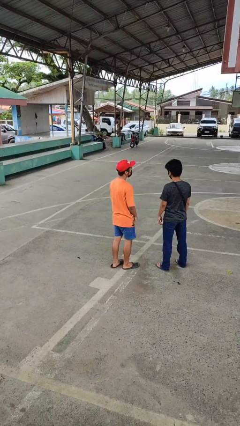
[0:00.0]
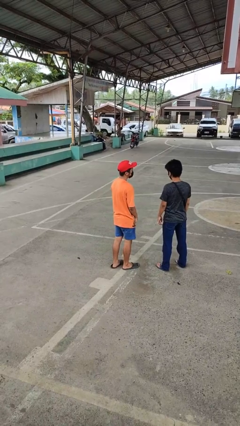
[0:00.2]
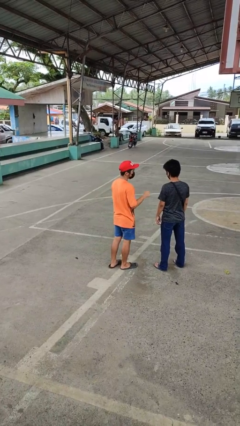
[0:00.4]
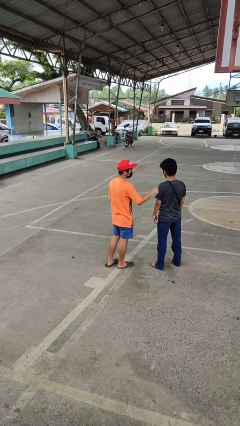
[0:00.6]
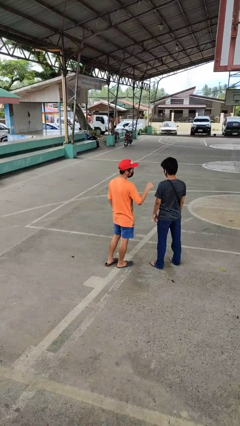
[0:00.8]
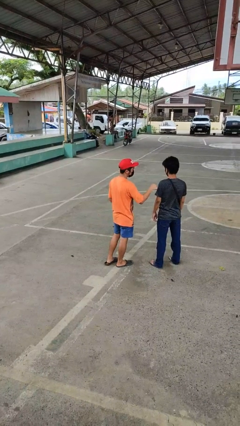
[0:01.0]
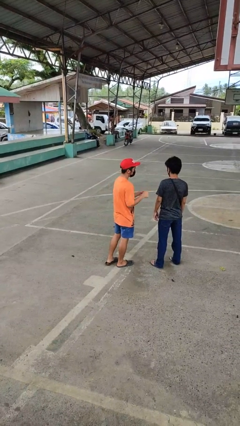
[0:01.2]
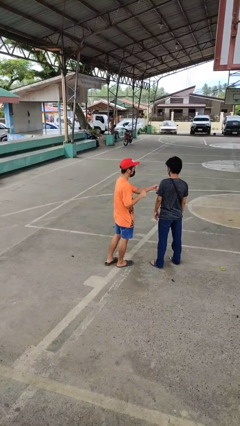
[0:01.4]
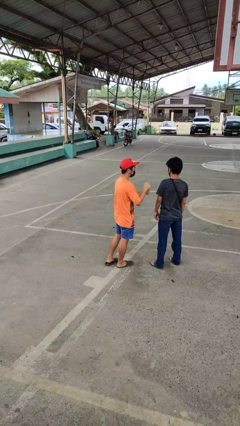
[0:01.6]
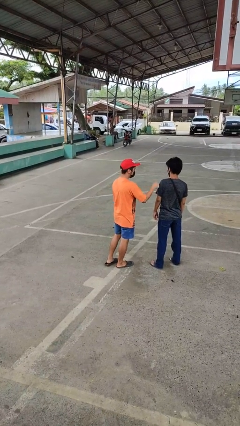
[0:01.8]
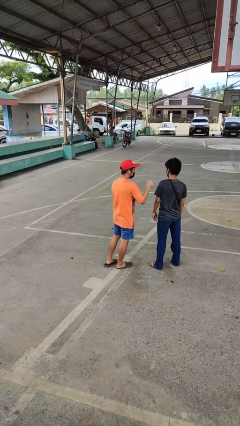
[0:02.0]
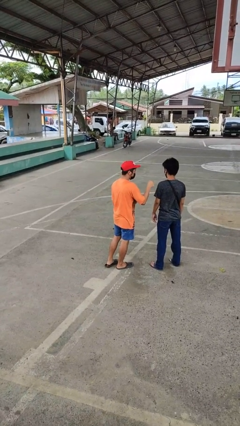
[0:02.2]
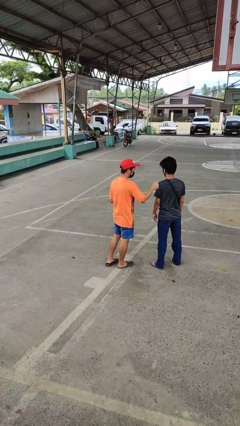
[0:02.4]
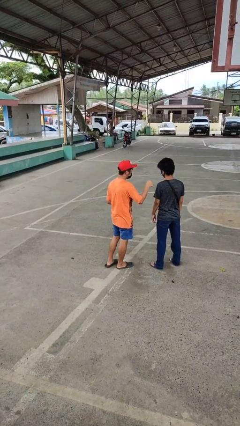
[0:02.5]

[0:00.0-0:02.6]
person pounds shoulders of person

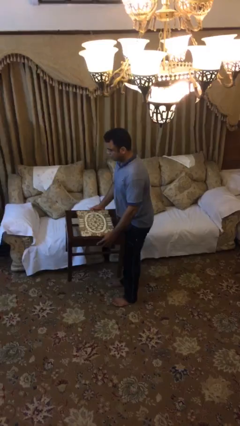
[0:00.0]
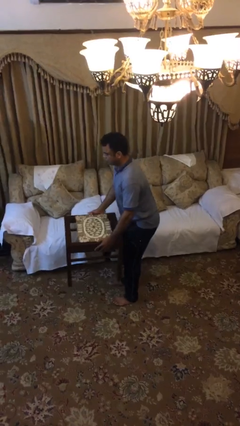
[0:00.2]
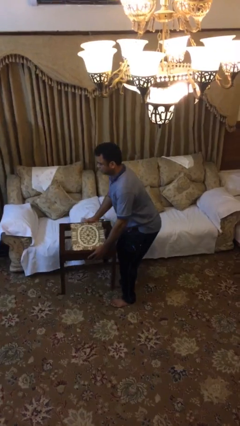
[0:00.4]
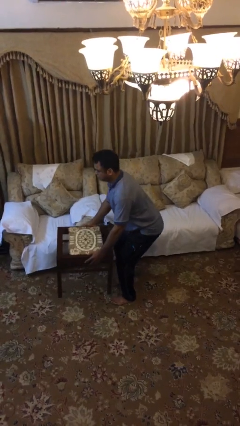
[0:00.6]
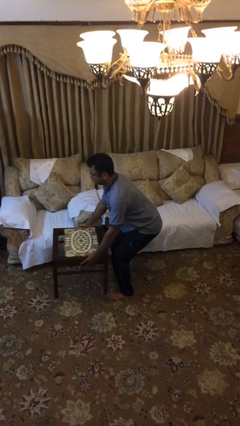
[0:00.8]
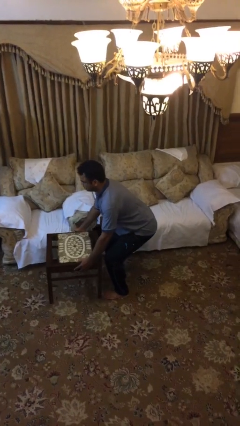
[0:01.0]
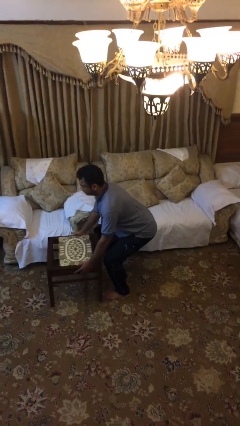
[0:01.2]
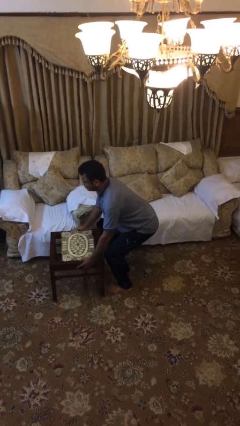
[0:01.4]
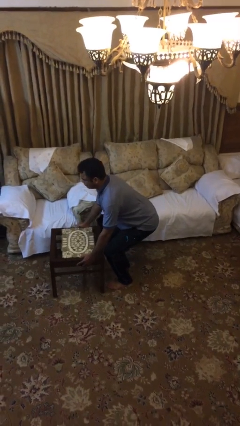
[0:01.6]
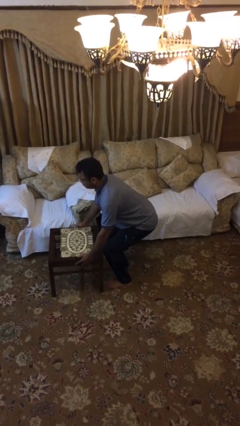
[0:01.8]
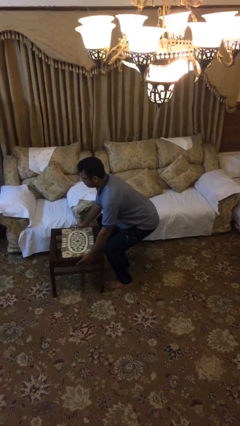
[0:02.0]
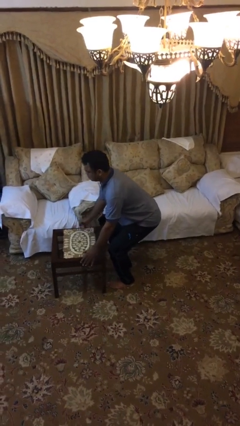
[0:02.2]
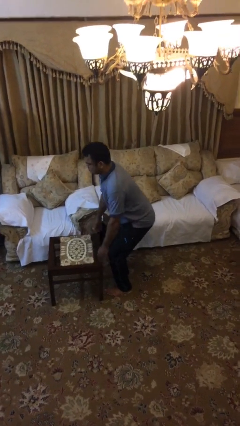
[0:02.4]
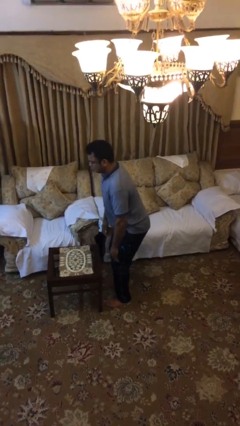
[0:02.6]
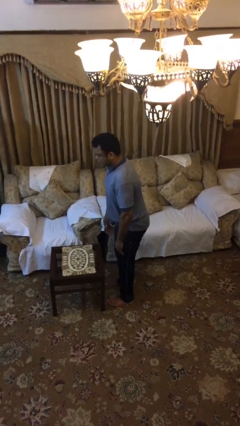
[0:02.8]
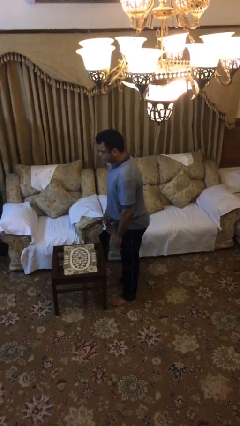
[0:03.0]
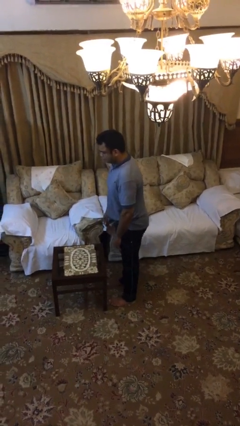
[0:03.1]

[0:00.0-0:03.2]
person puts down object on floor

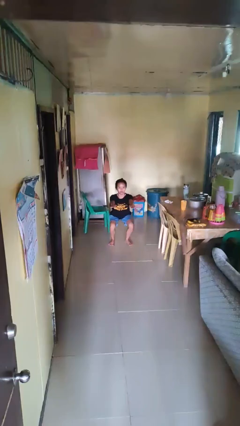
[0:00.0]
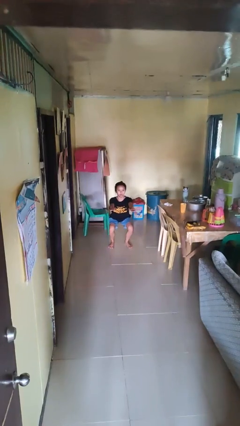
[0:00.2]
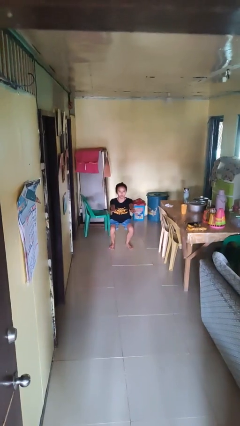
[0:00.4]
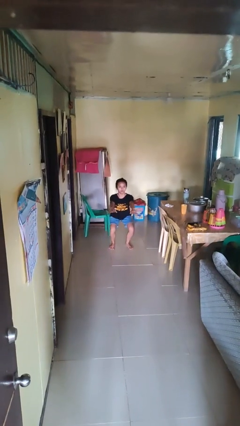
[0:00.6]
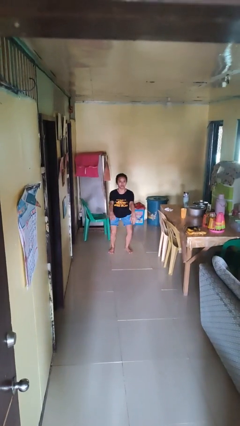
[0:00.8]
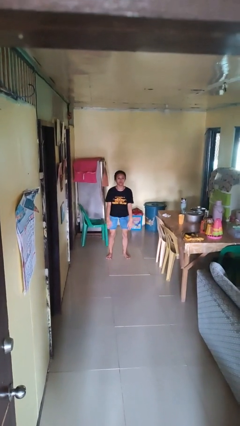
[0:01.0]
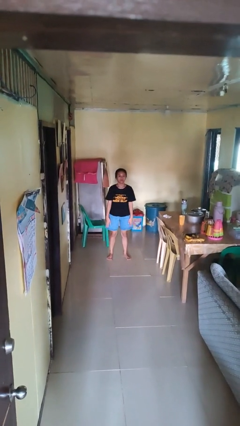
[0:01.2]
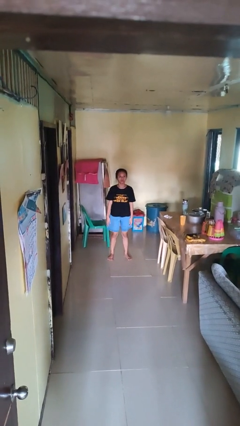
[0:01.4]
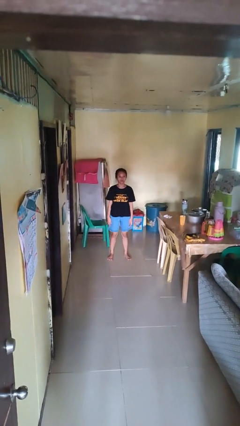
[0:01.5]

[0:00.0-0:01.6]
person stands up

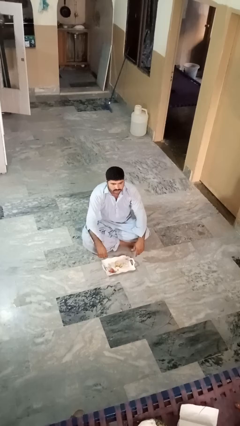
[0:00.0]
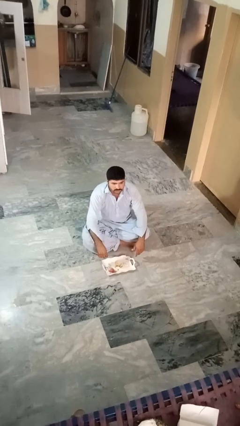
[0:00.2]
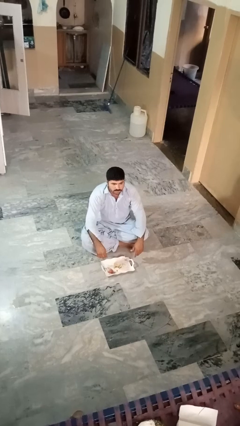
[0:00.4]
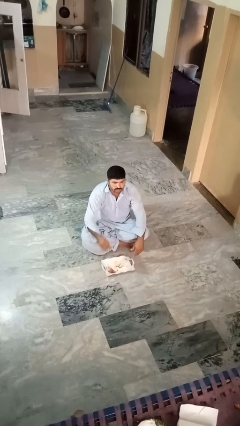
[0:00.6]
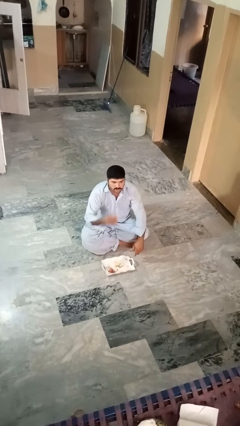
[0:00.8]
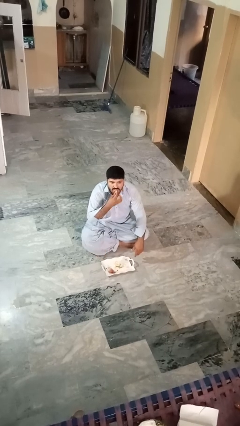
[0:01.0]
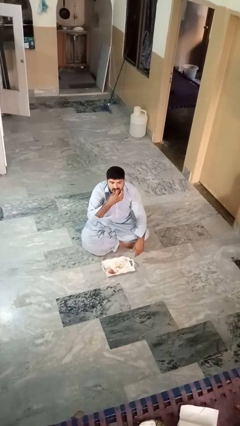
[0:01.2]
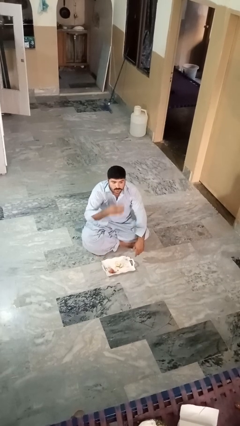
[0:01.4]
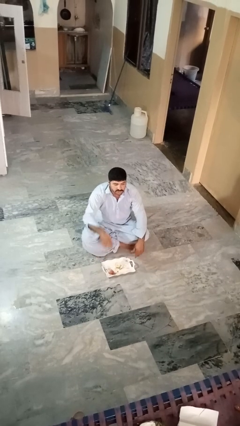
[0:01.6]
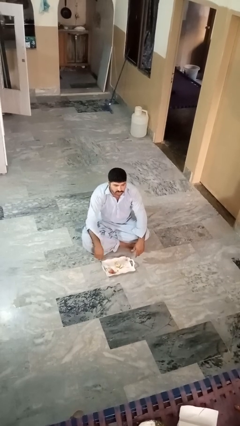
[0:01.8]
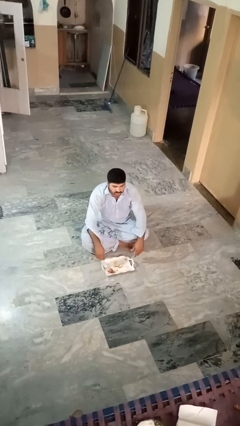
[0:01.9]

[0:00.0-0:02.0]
person eats apple

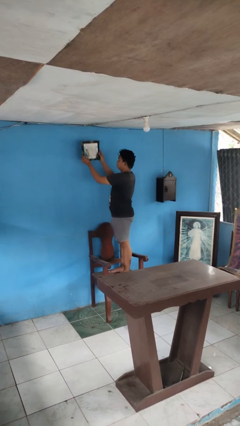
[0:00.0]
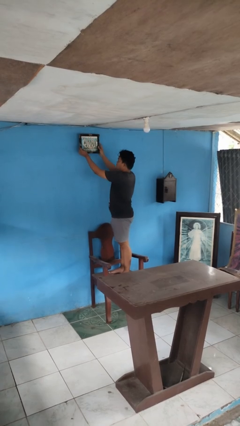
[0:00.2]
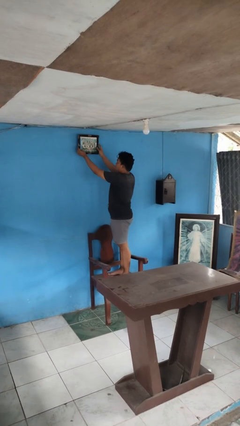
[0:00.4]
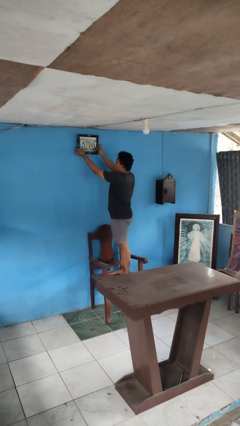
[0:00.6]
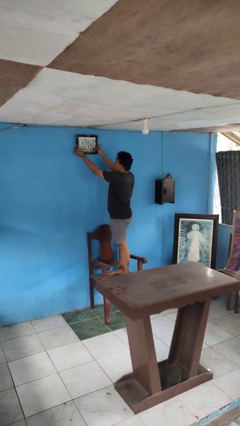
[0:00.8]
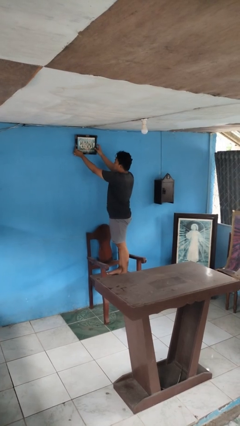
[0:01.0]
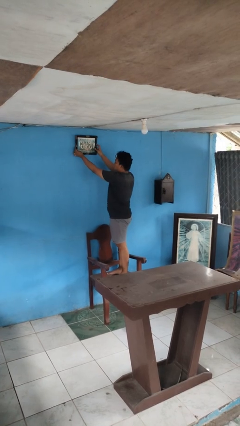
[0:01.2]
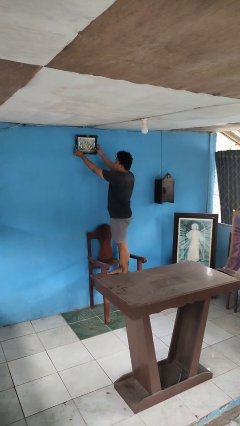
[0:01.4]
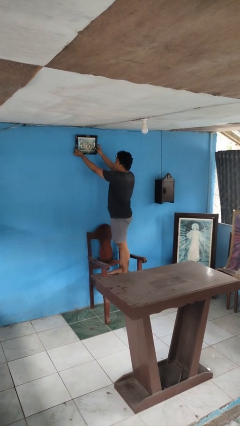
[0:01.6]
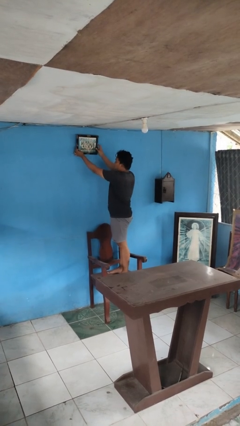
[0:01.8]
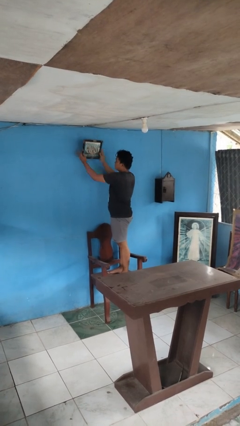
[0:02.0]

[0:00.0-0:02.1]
person puts up picture frame

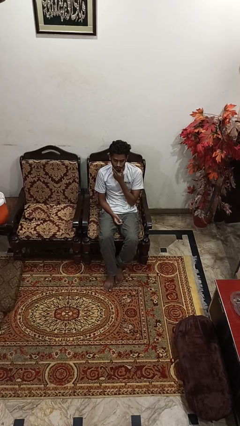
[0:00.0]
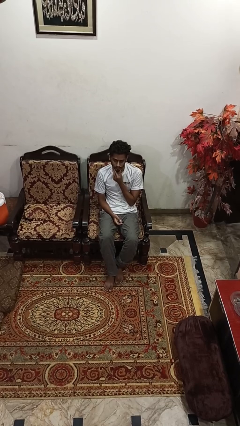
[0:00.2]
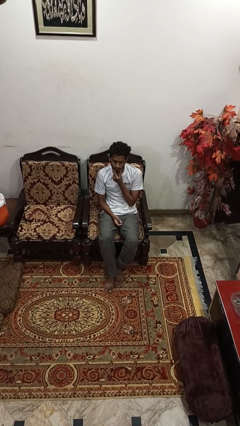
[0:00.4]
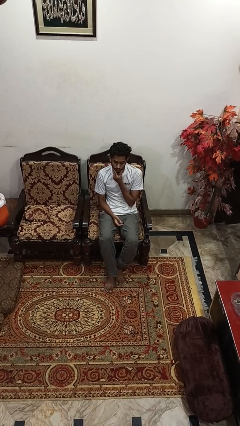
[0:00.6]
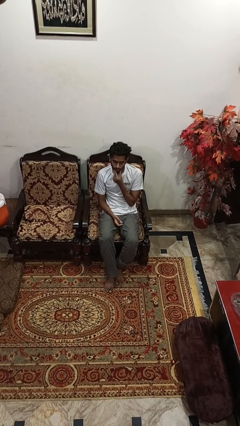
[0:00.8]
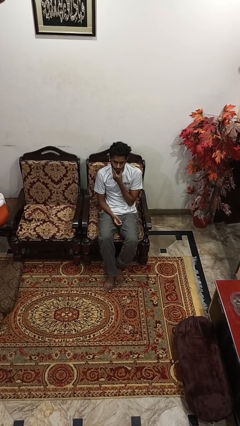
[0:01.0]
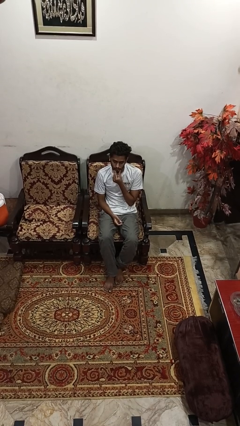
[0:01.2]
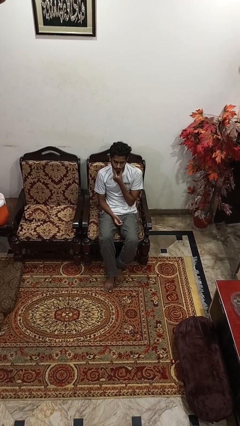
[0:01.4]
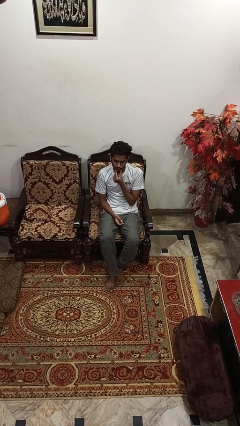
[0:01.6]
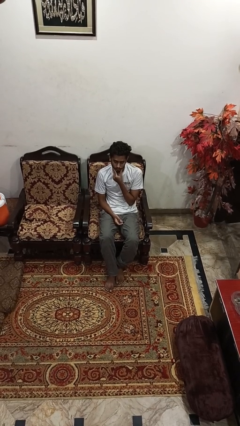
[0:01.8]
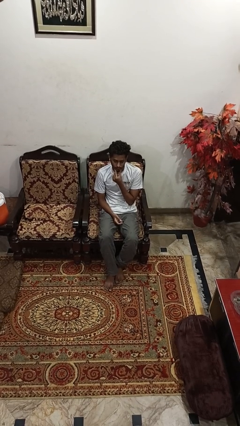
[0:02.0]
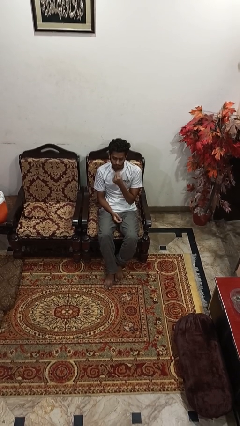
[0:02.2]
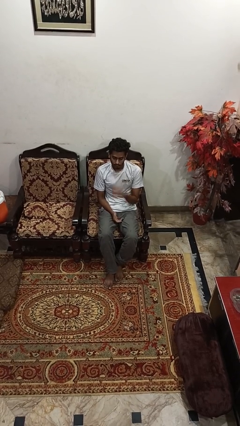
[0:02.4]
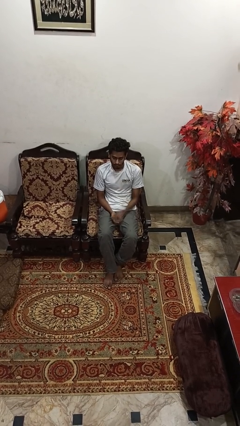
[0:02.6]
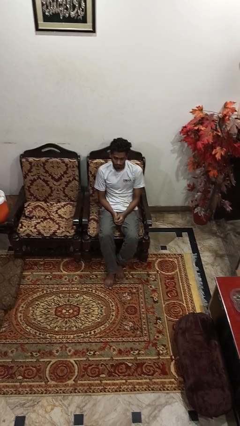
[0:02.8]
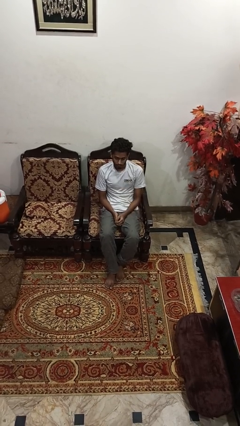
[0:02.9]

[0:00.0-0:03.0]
person strokes chin

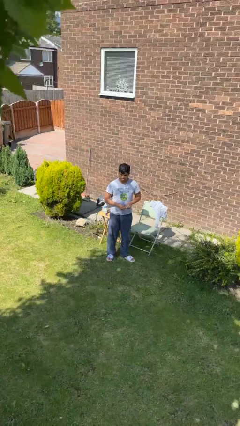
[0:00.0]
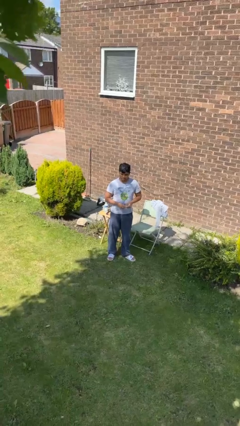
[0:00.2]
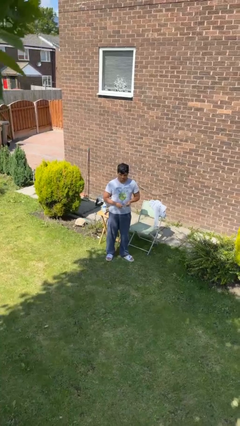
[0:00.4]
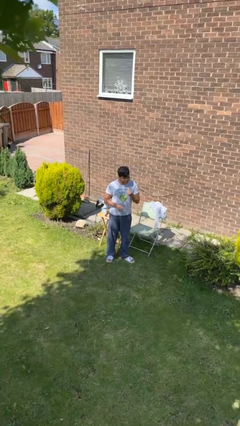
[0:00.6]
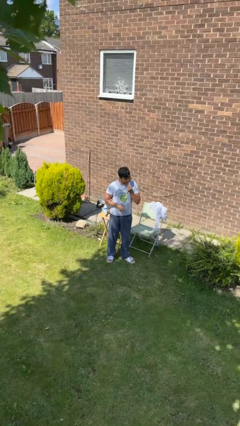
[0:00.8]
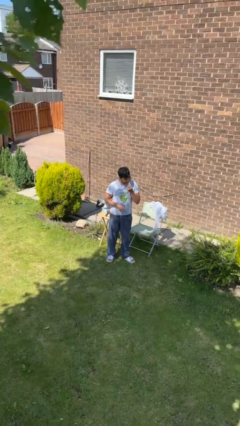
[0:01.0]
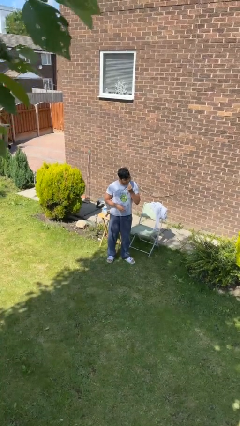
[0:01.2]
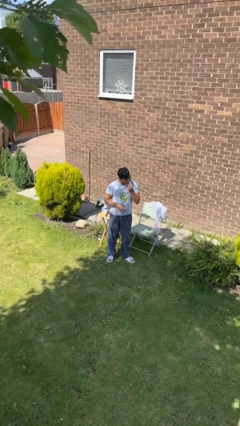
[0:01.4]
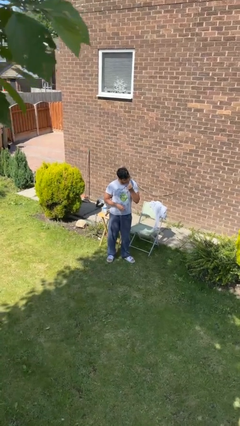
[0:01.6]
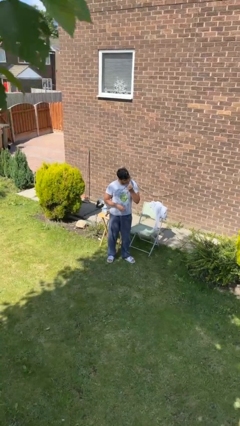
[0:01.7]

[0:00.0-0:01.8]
person flosses

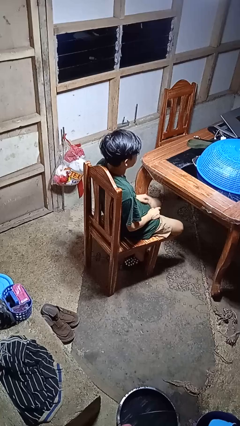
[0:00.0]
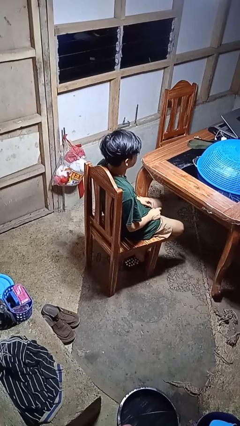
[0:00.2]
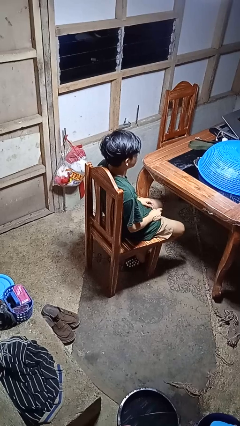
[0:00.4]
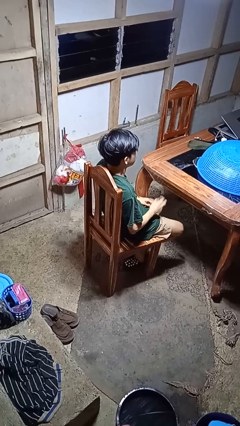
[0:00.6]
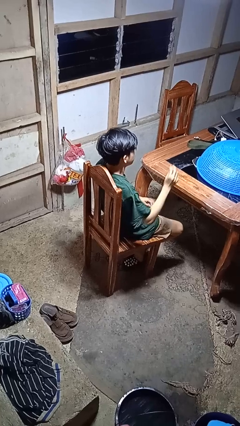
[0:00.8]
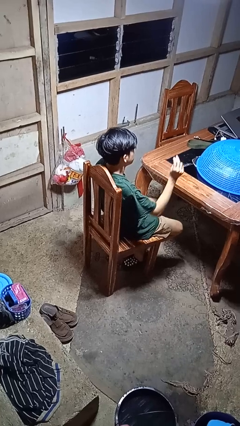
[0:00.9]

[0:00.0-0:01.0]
person snaps fingers

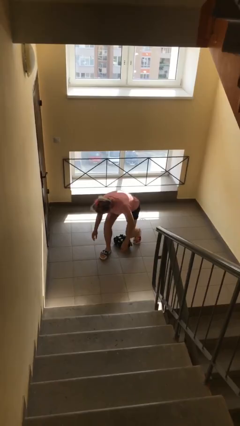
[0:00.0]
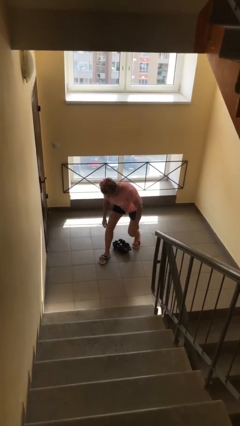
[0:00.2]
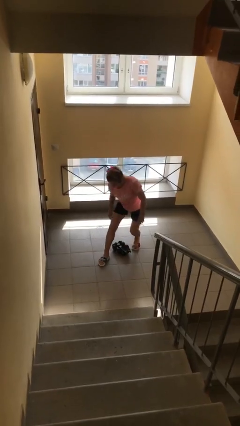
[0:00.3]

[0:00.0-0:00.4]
person stands up from floor
